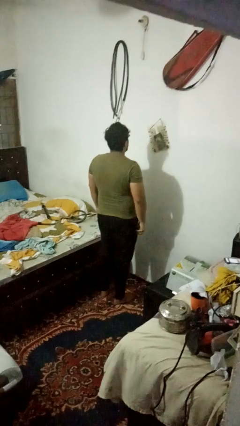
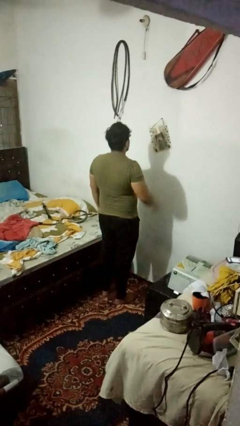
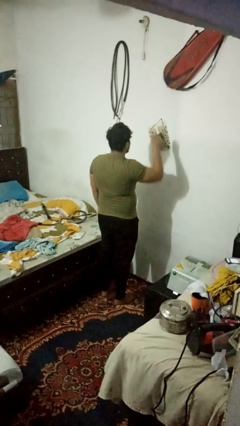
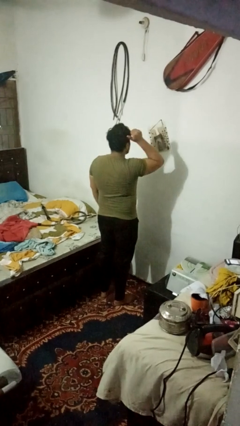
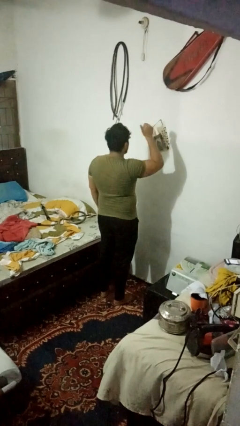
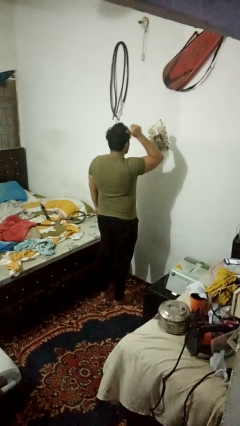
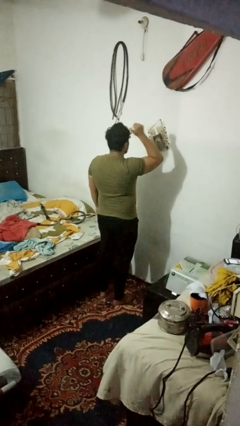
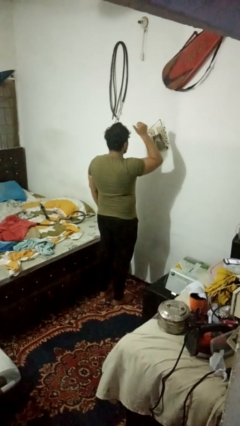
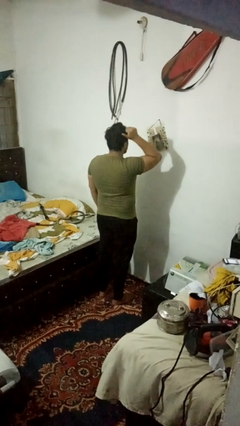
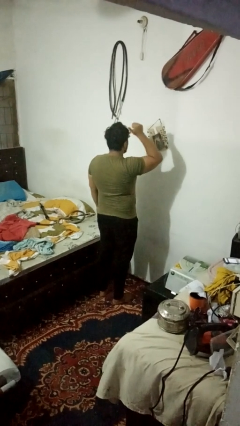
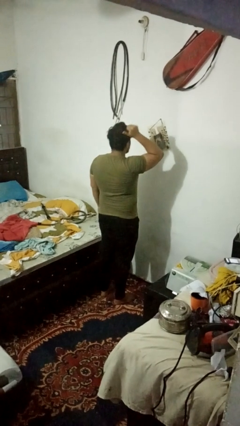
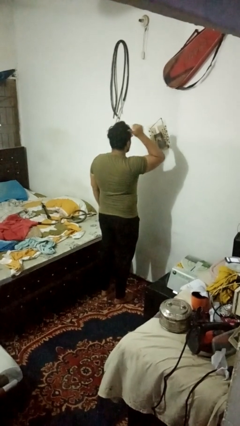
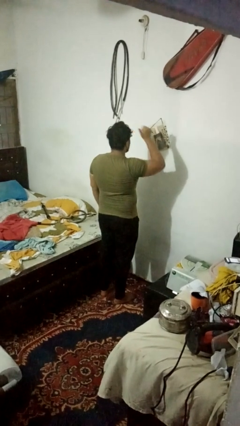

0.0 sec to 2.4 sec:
person gestures behind me

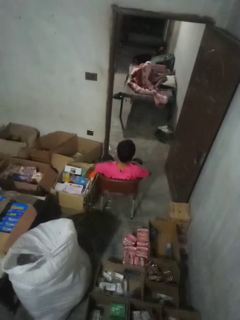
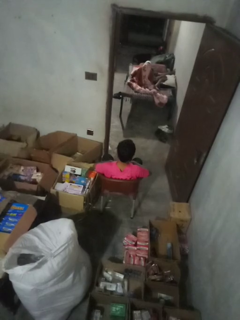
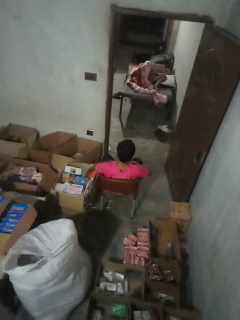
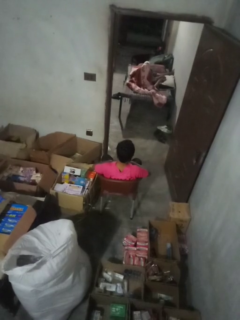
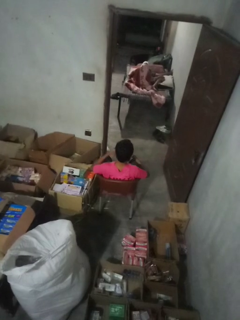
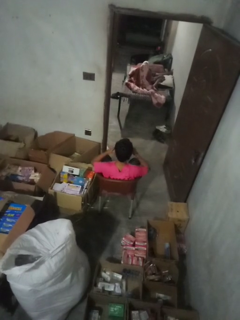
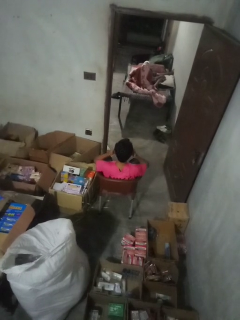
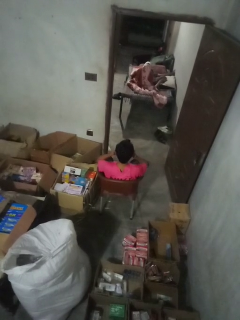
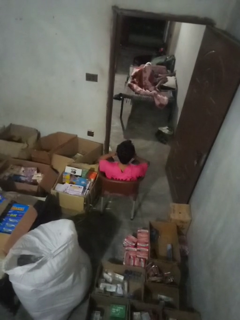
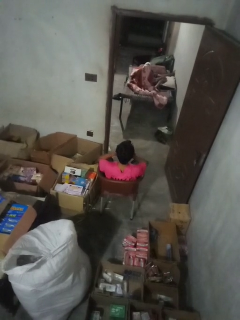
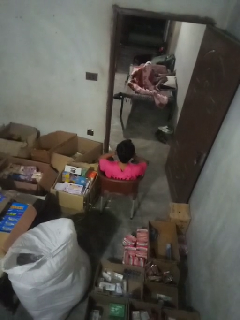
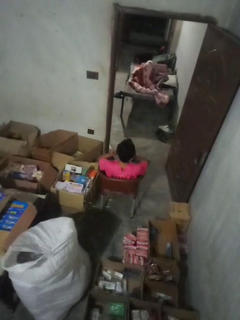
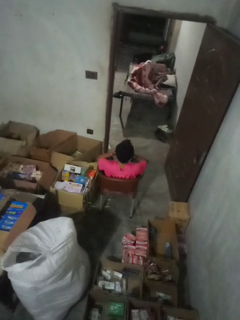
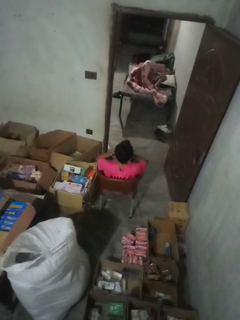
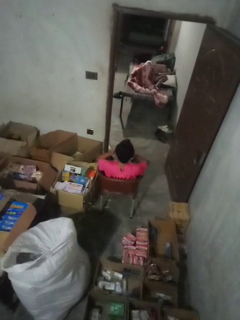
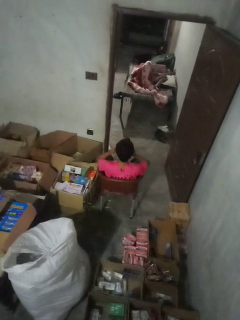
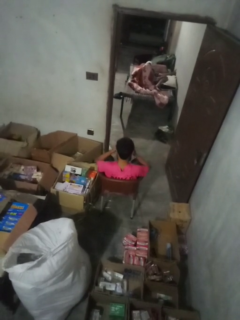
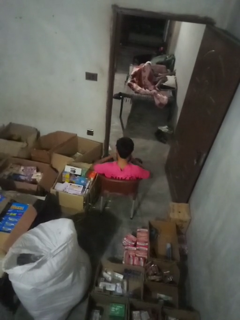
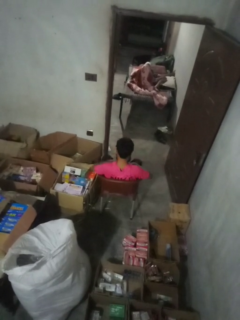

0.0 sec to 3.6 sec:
person rubs eyes

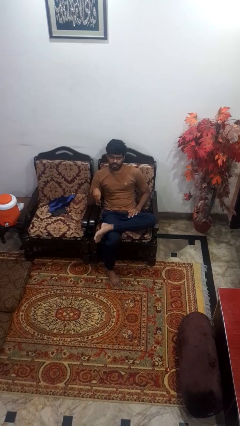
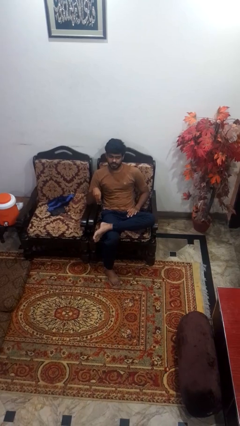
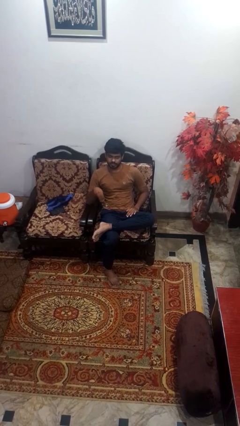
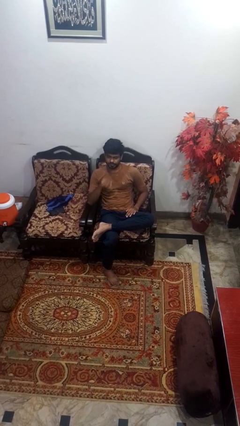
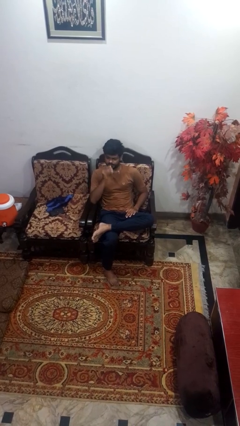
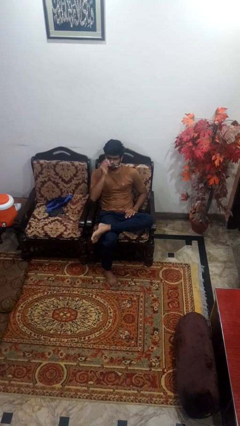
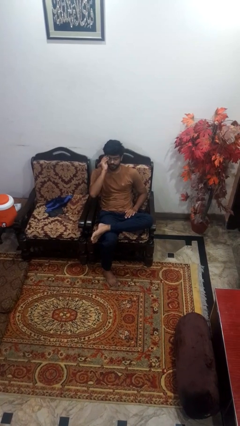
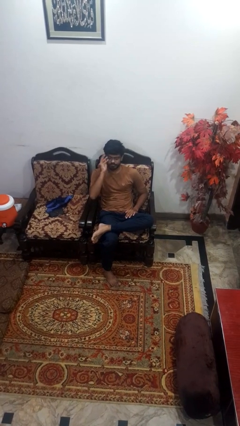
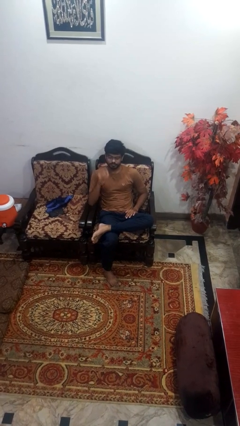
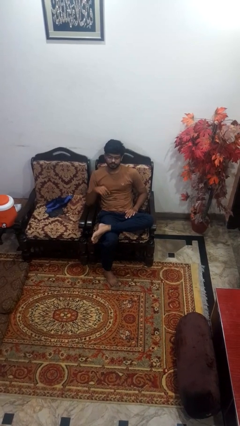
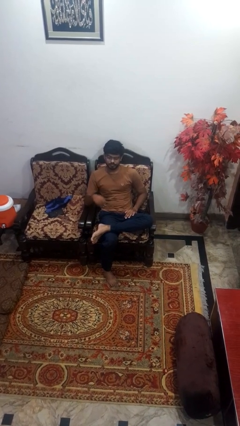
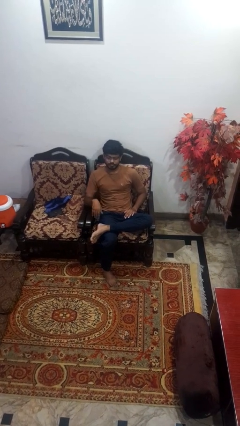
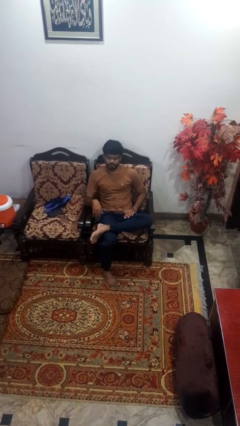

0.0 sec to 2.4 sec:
person puts on glasses

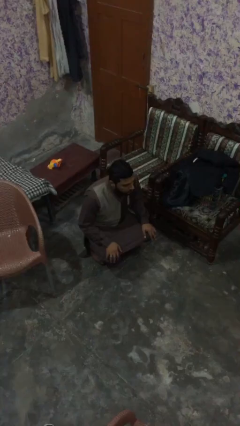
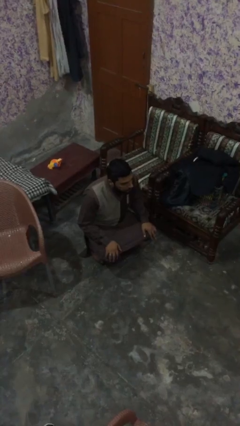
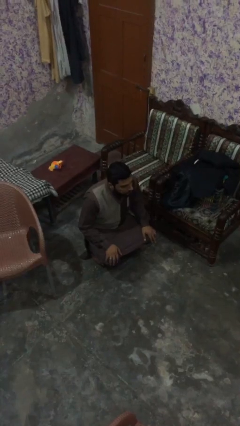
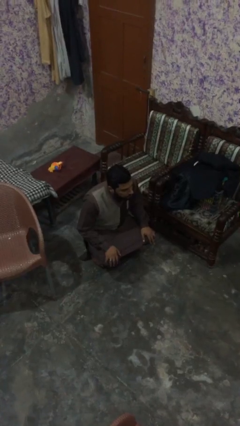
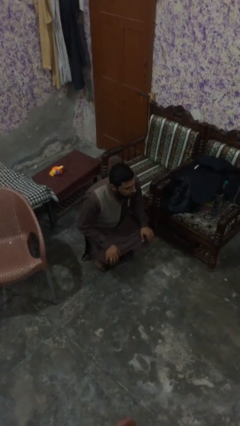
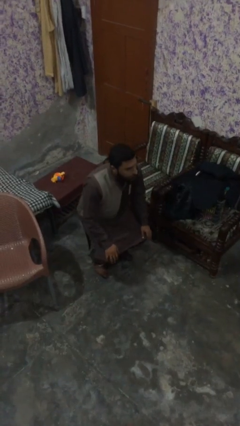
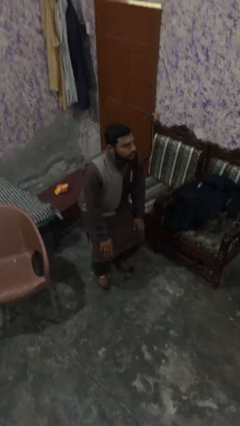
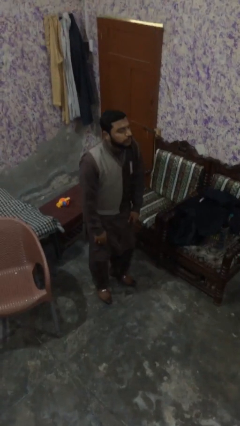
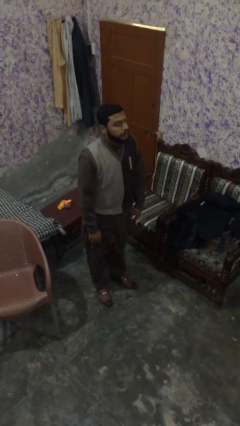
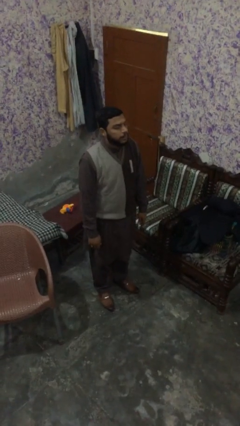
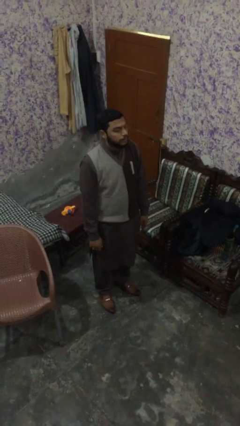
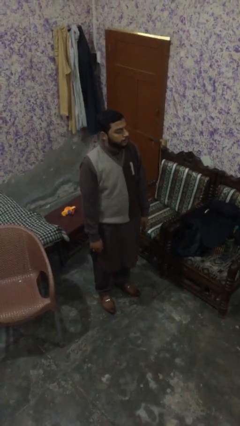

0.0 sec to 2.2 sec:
person stands up

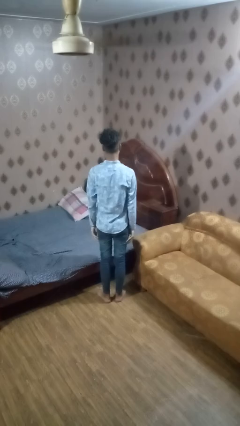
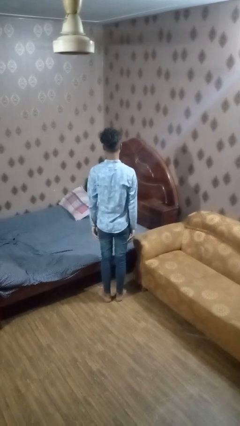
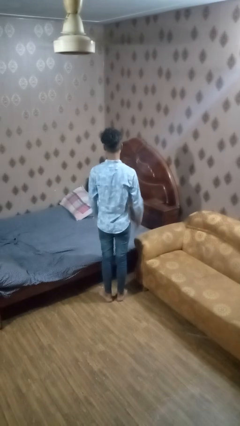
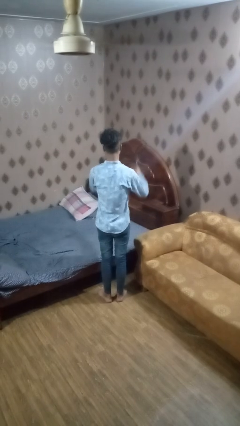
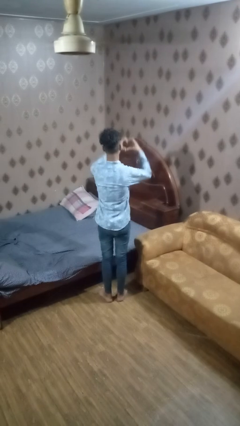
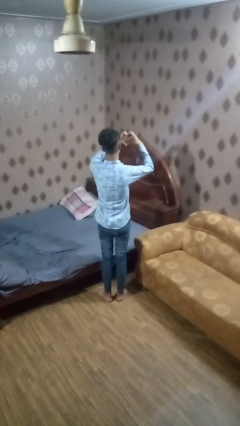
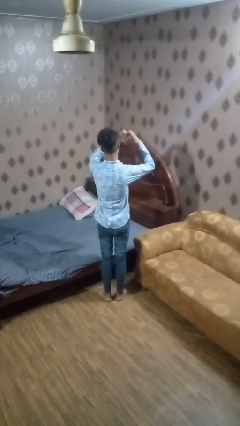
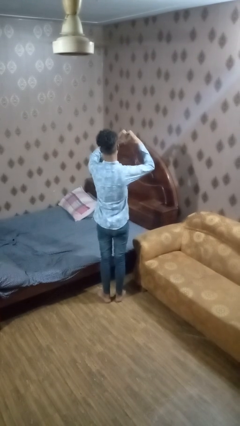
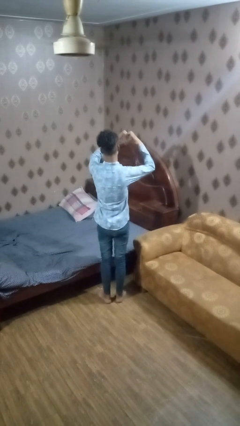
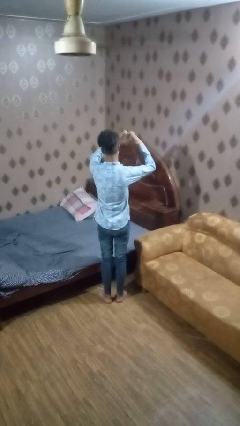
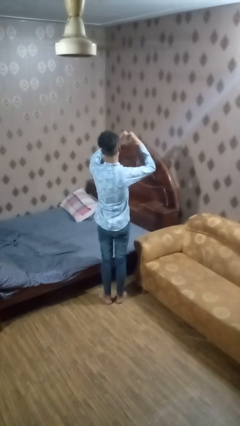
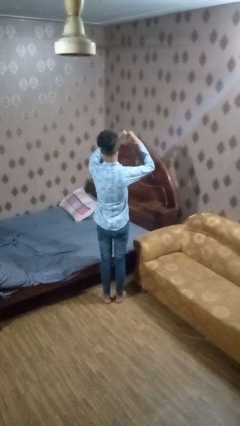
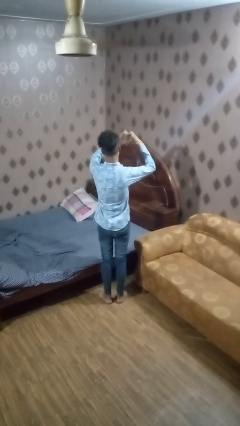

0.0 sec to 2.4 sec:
person gestures heart

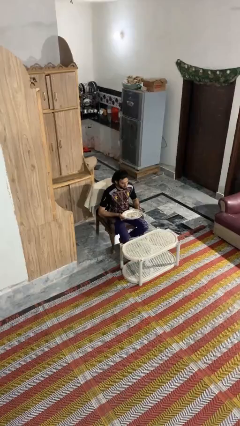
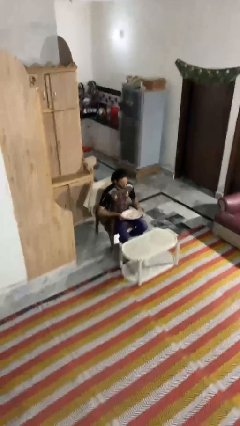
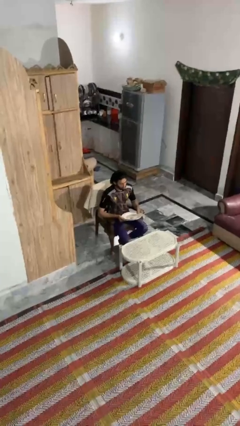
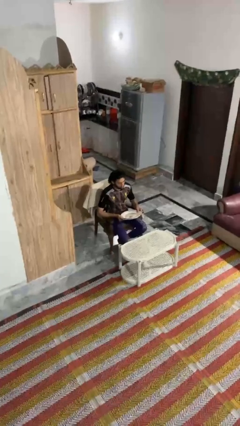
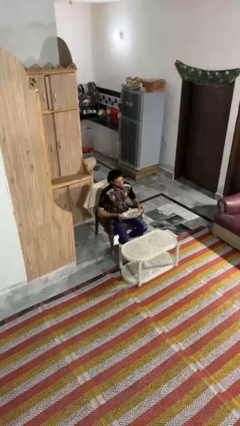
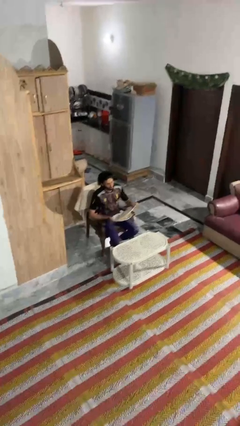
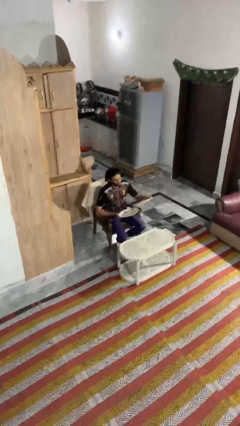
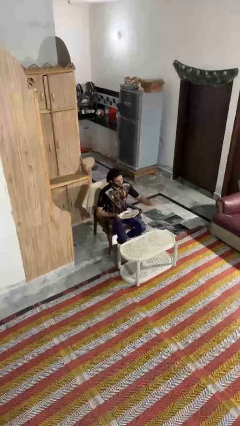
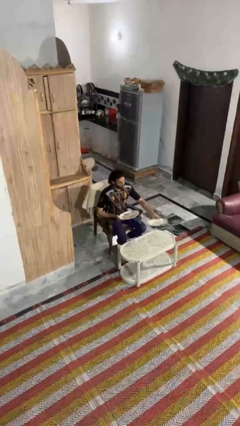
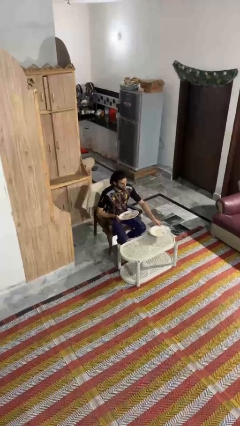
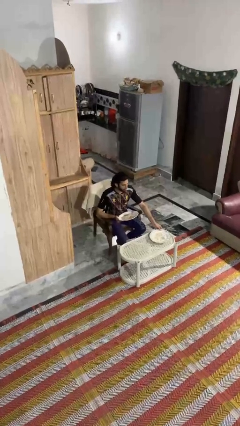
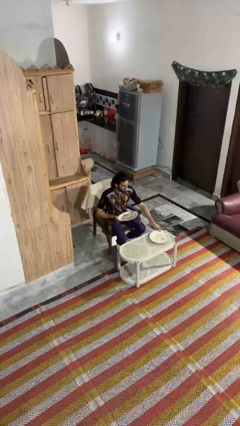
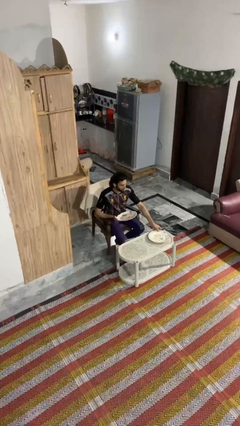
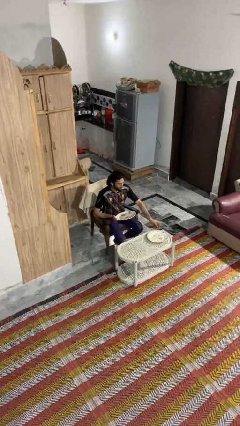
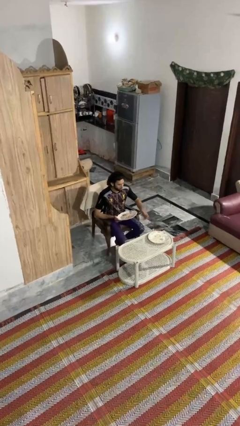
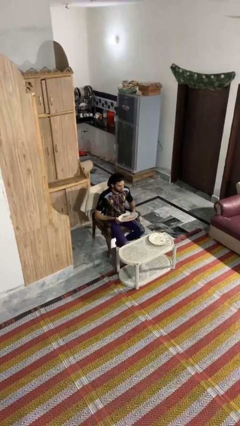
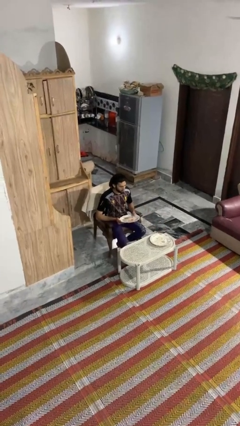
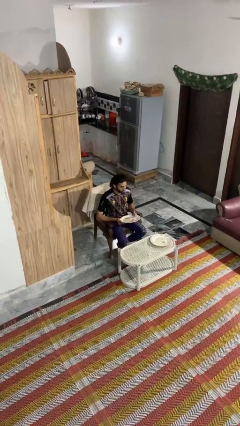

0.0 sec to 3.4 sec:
person sets table

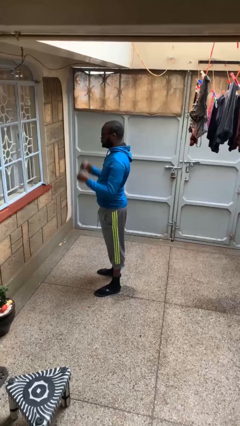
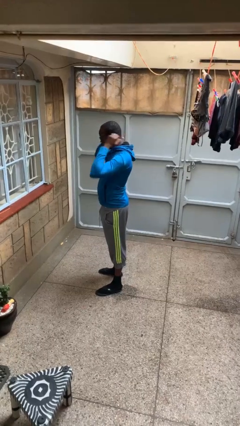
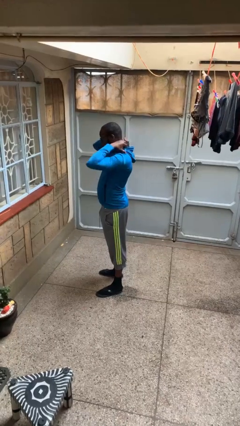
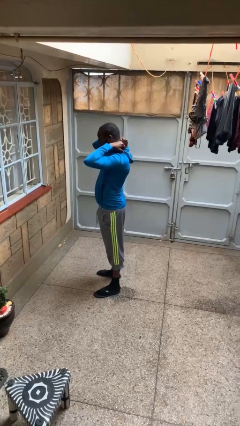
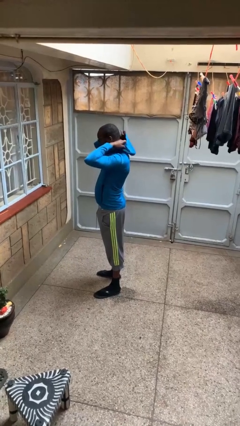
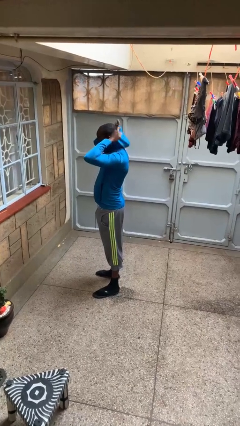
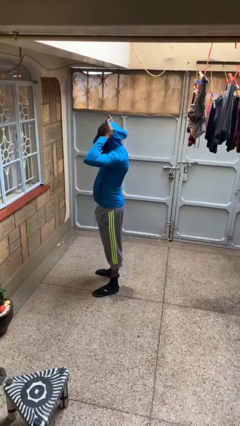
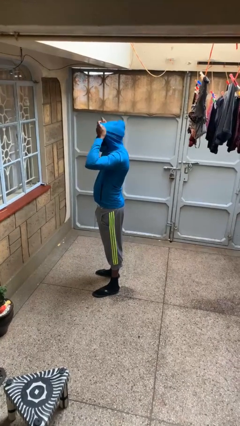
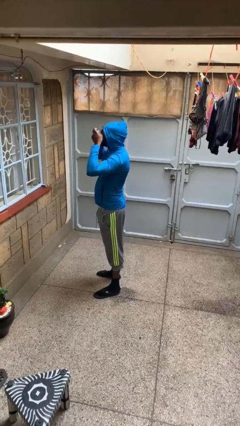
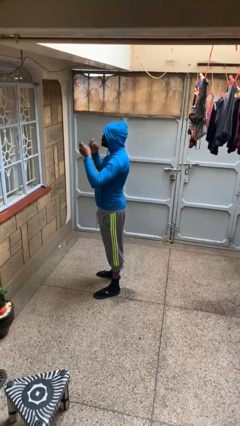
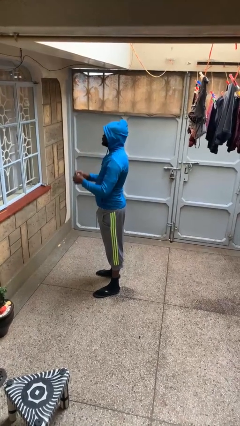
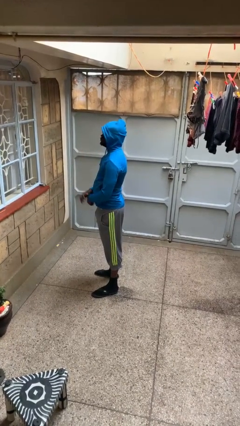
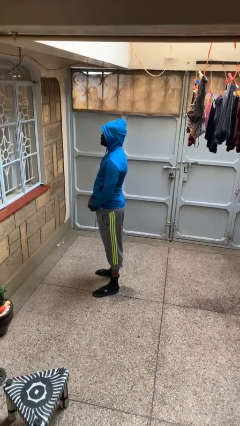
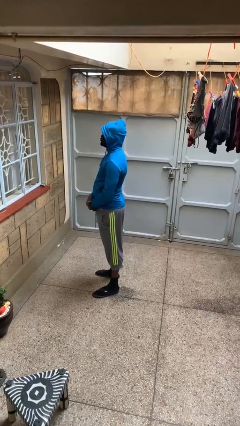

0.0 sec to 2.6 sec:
person puts on hoodie
